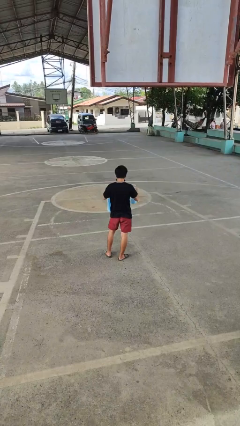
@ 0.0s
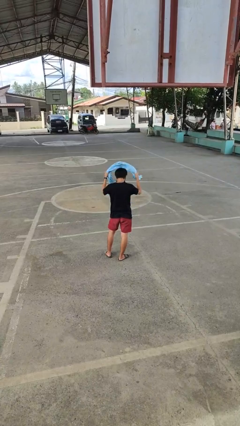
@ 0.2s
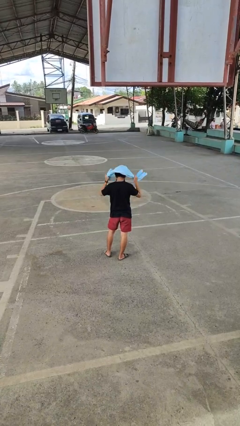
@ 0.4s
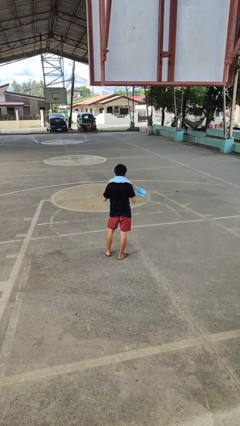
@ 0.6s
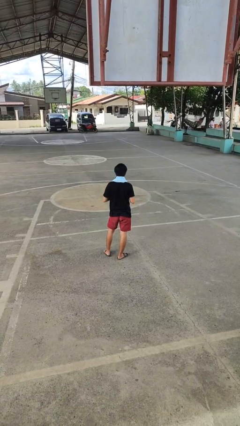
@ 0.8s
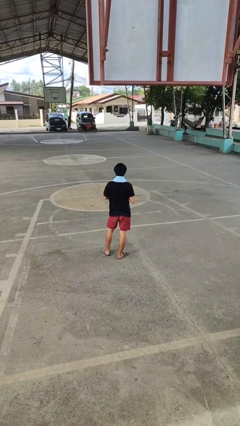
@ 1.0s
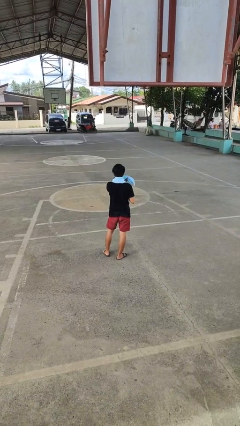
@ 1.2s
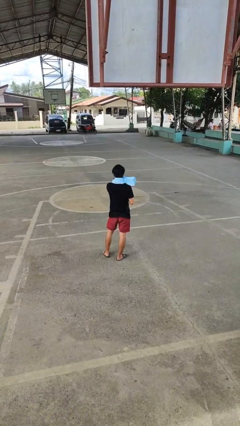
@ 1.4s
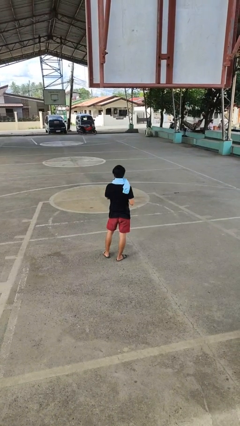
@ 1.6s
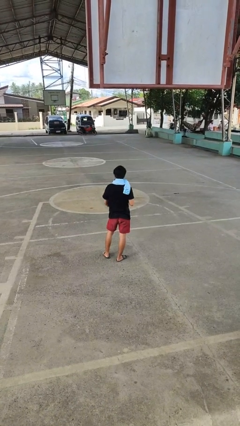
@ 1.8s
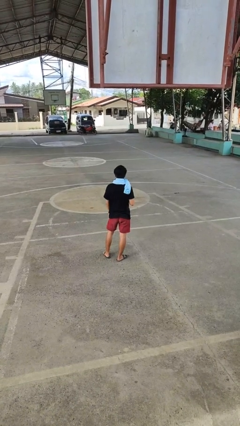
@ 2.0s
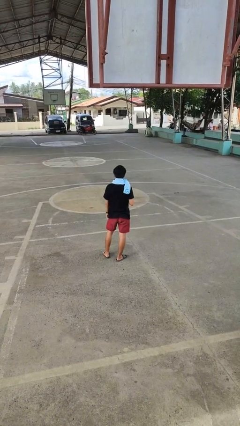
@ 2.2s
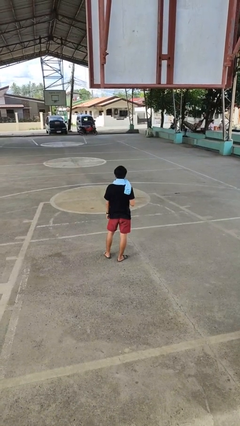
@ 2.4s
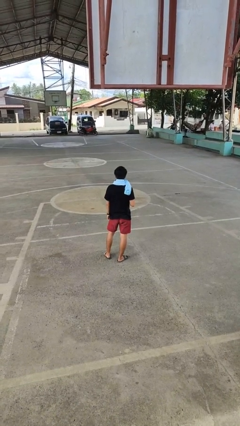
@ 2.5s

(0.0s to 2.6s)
person puts on scarf

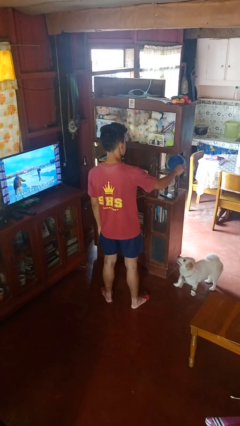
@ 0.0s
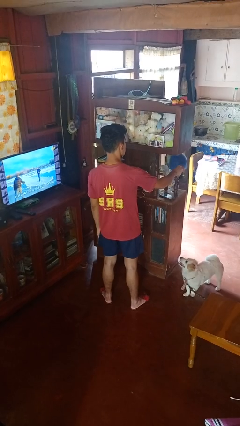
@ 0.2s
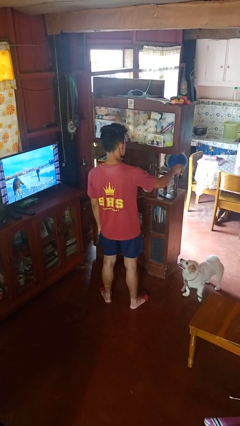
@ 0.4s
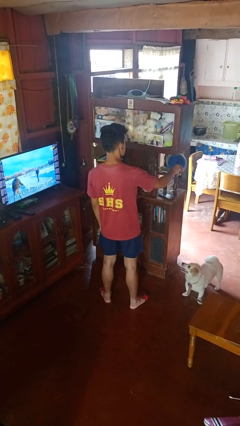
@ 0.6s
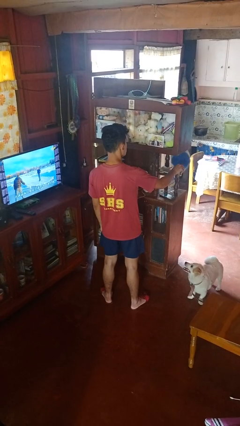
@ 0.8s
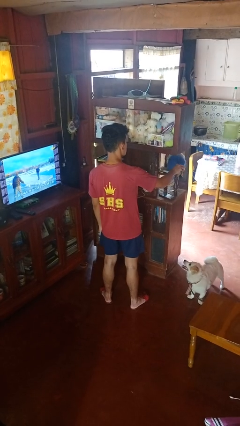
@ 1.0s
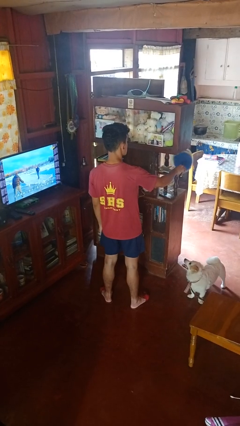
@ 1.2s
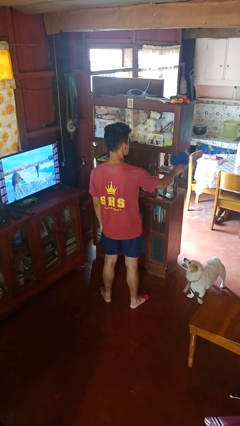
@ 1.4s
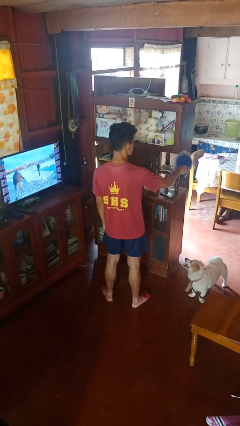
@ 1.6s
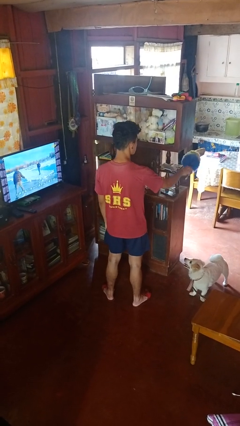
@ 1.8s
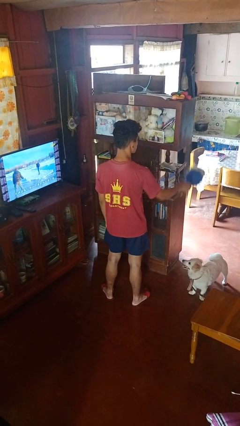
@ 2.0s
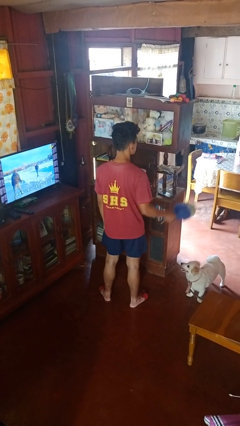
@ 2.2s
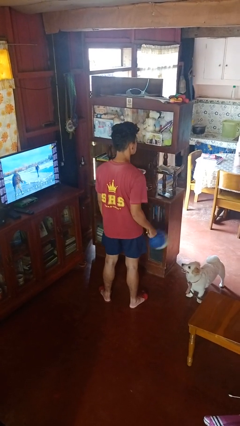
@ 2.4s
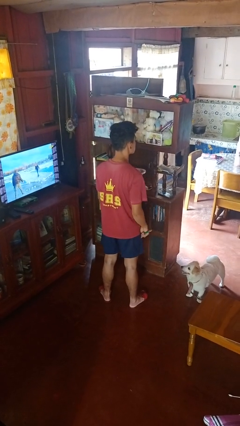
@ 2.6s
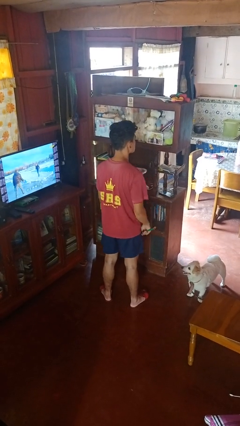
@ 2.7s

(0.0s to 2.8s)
person dusts furniture

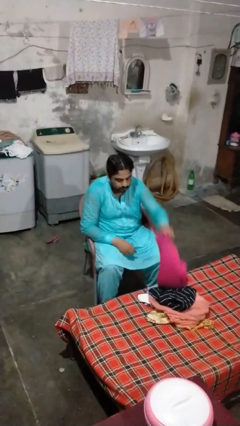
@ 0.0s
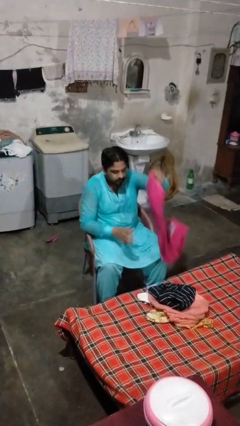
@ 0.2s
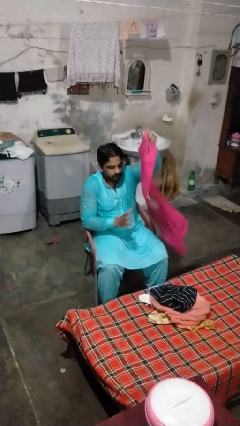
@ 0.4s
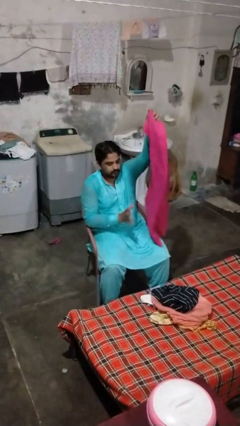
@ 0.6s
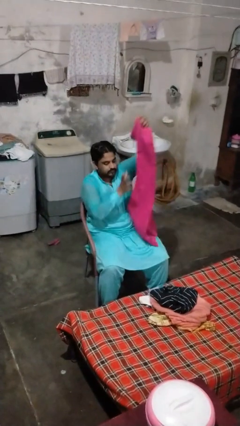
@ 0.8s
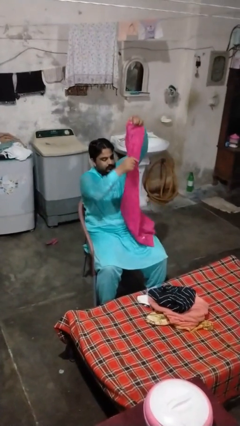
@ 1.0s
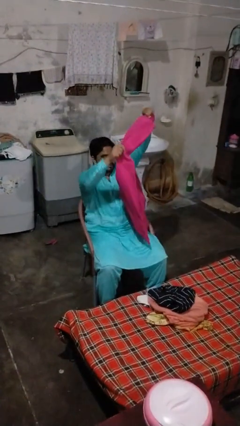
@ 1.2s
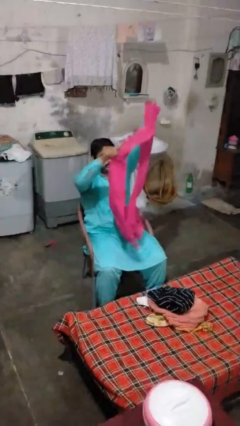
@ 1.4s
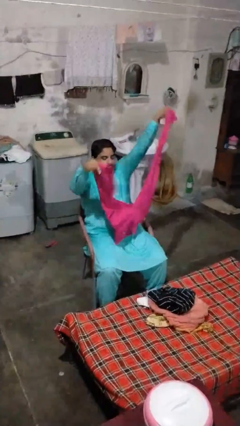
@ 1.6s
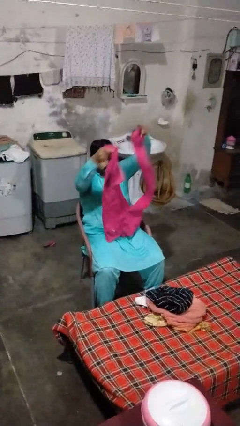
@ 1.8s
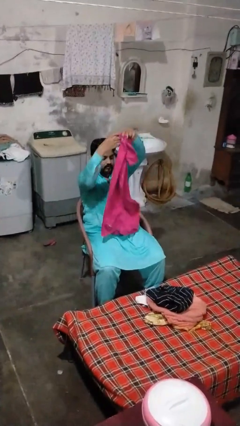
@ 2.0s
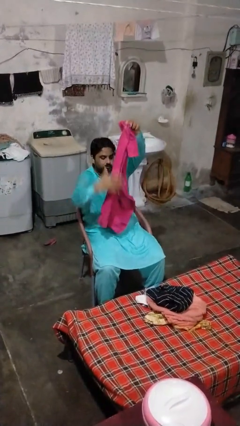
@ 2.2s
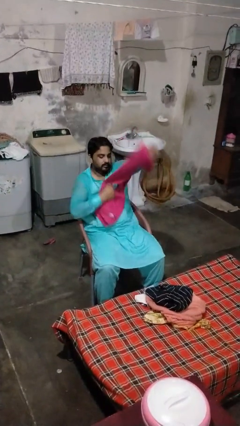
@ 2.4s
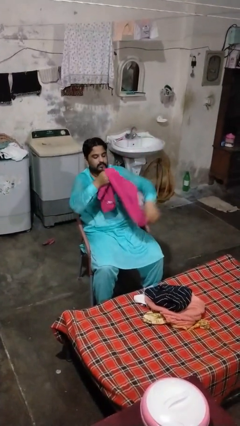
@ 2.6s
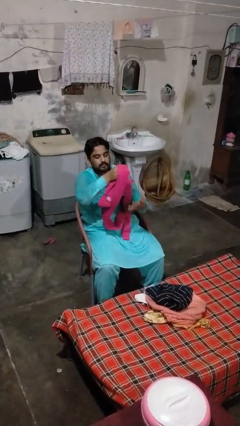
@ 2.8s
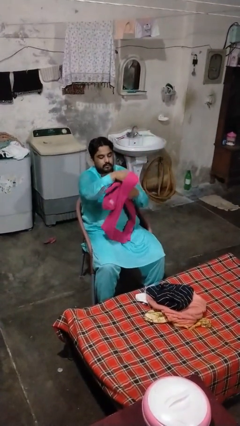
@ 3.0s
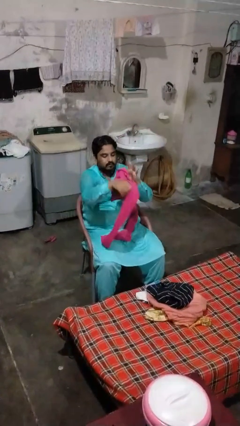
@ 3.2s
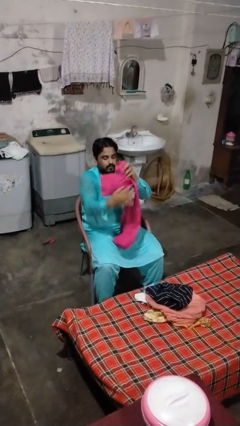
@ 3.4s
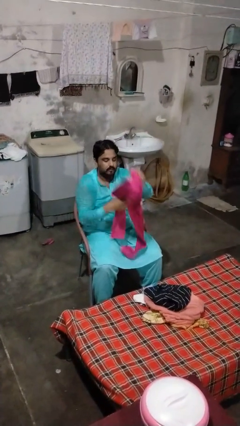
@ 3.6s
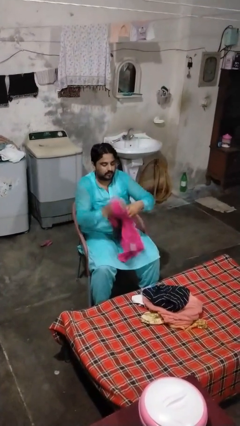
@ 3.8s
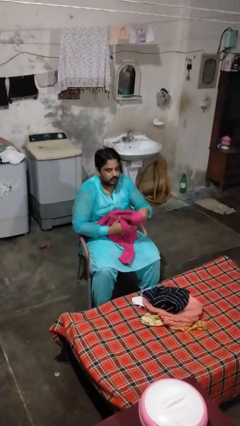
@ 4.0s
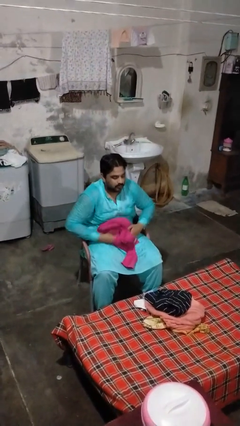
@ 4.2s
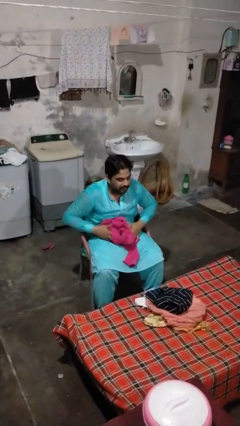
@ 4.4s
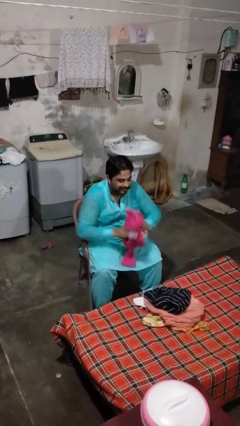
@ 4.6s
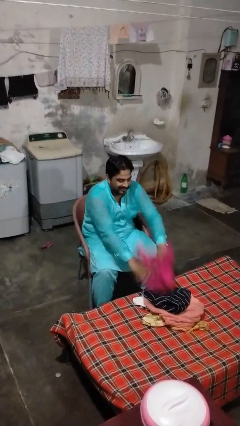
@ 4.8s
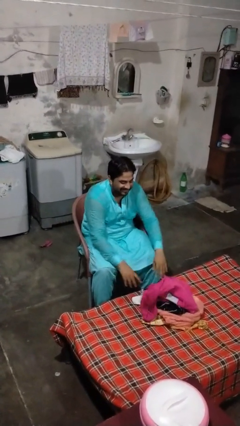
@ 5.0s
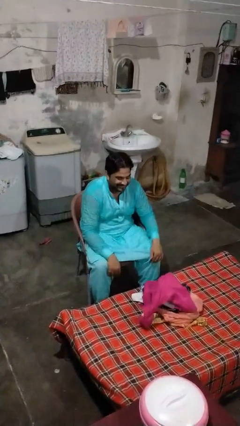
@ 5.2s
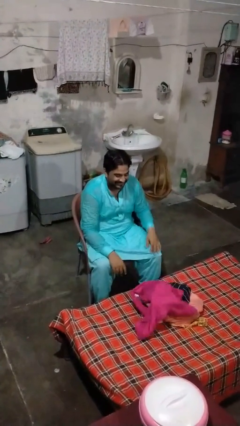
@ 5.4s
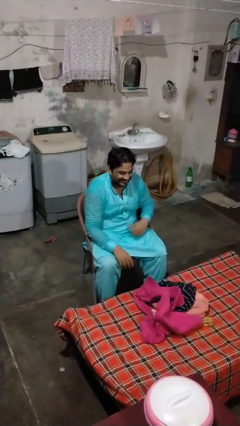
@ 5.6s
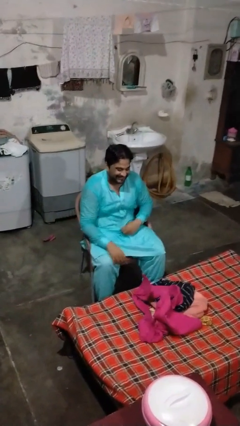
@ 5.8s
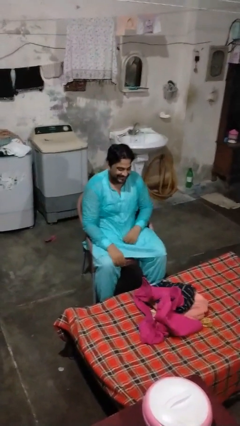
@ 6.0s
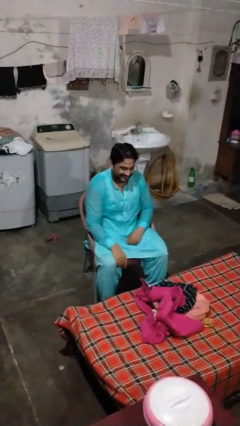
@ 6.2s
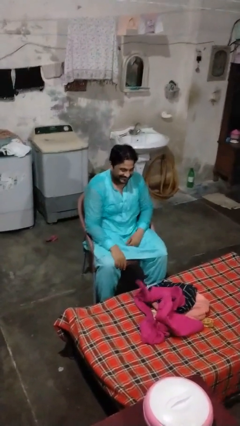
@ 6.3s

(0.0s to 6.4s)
person folds pants

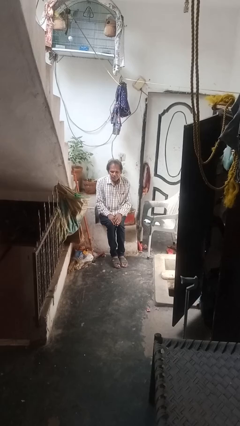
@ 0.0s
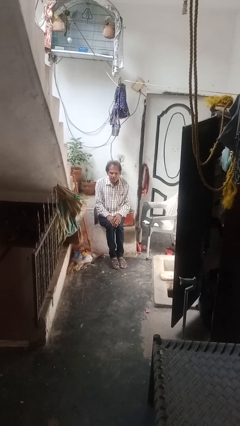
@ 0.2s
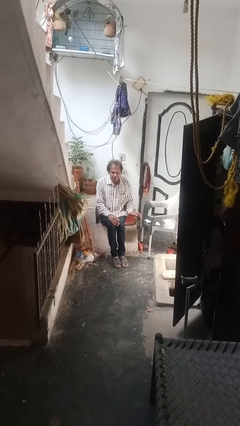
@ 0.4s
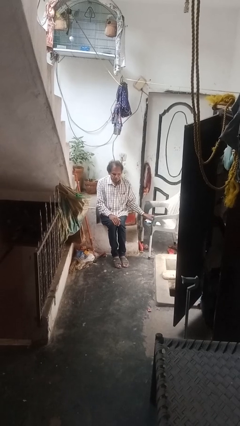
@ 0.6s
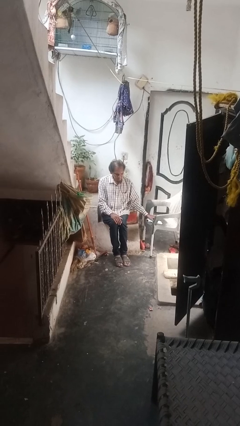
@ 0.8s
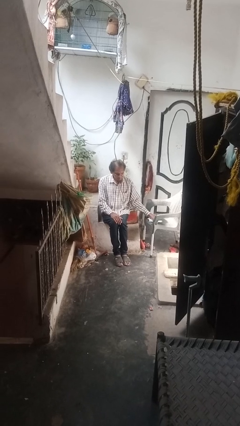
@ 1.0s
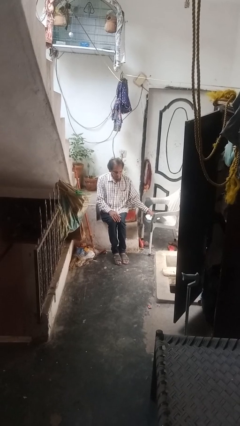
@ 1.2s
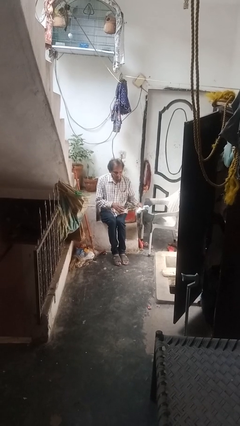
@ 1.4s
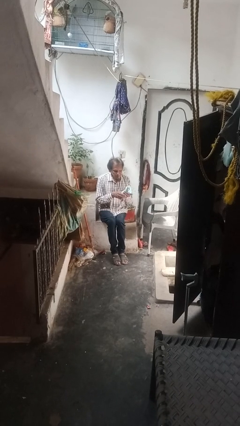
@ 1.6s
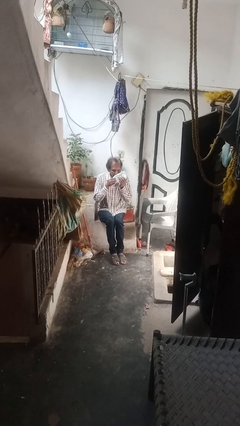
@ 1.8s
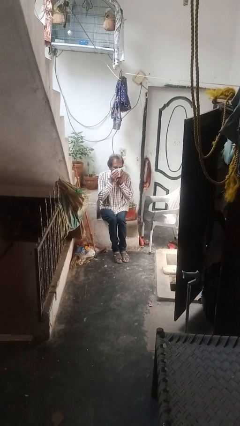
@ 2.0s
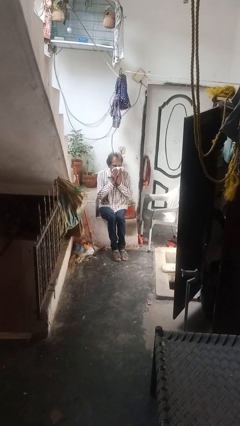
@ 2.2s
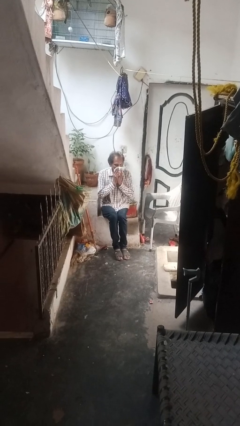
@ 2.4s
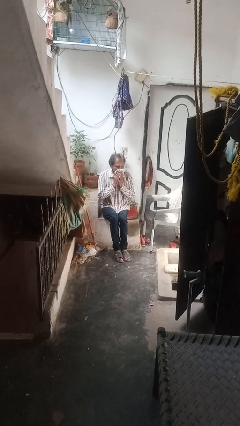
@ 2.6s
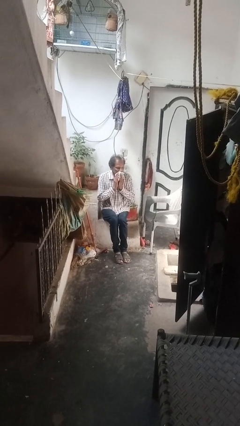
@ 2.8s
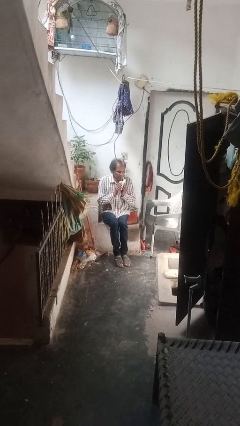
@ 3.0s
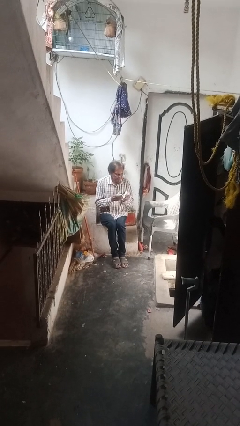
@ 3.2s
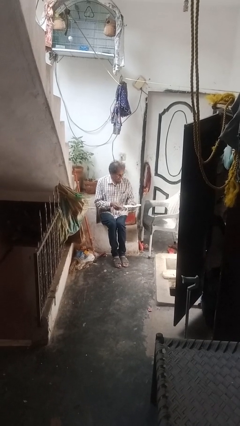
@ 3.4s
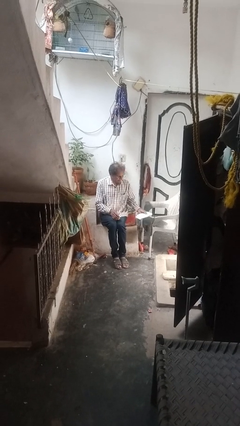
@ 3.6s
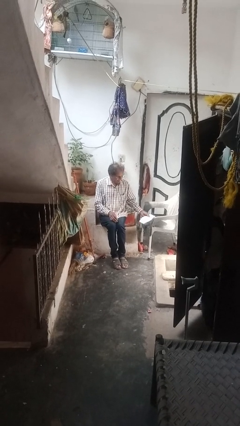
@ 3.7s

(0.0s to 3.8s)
person wipes mouth with napkin

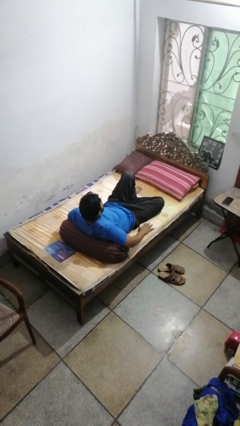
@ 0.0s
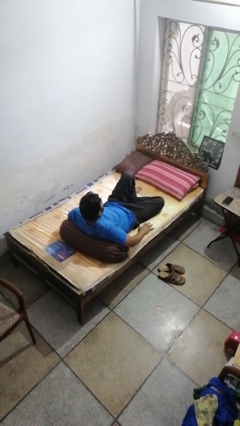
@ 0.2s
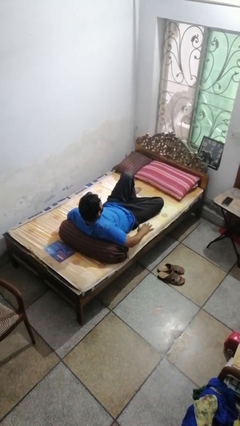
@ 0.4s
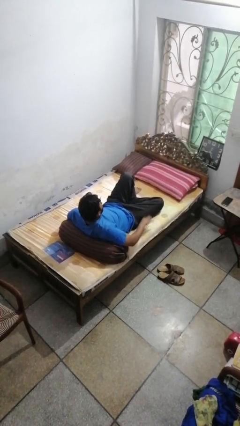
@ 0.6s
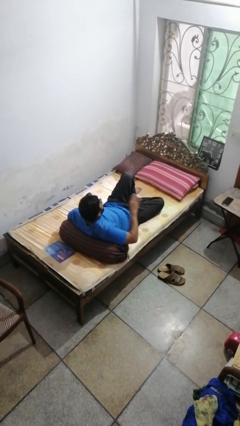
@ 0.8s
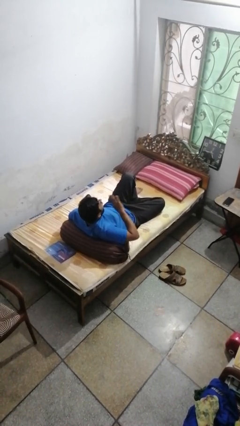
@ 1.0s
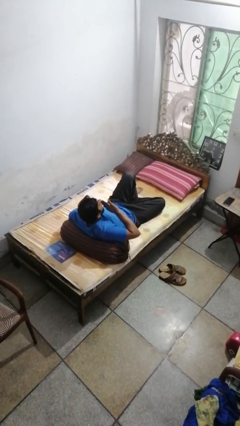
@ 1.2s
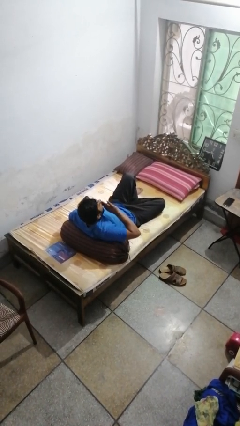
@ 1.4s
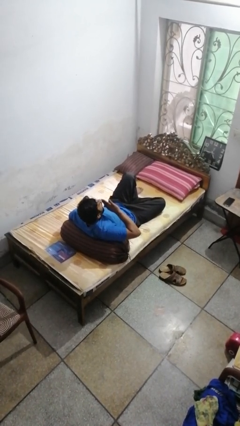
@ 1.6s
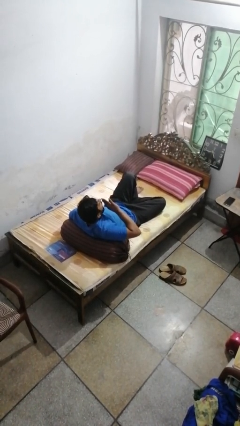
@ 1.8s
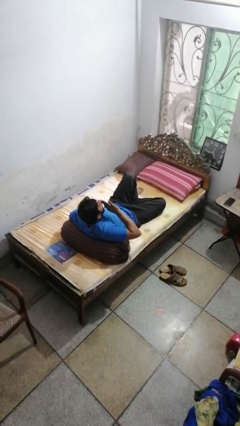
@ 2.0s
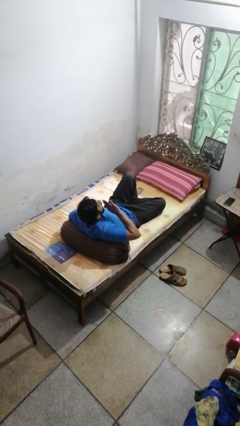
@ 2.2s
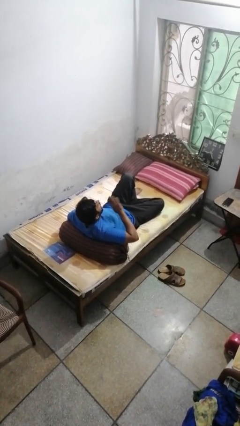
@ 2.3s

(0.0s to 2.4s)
person yawns
